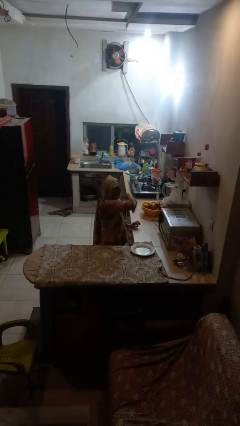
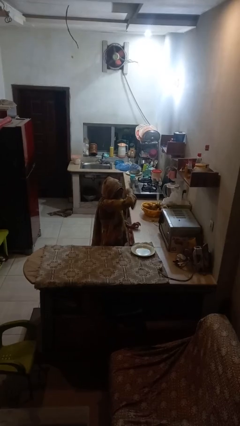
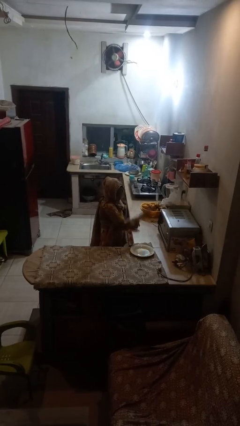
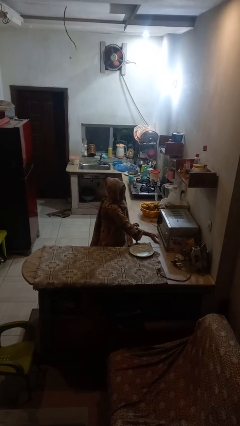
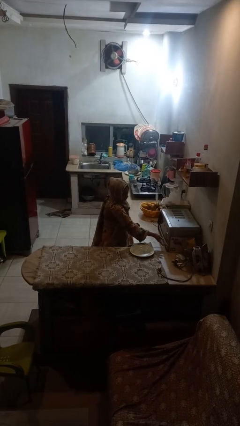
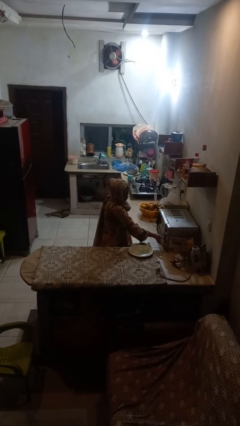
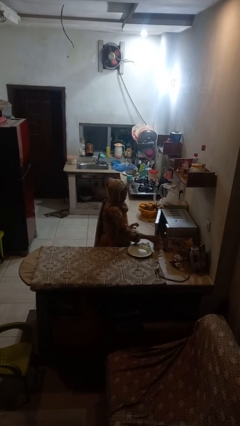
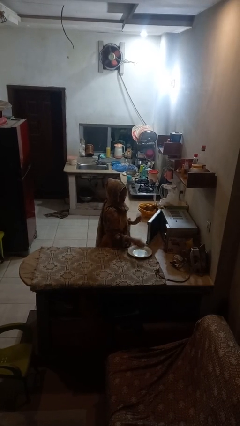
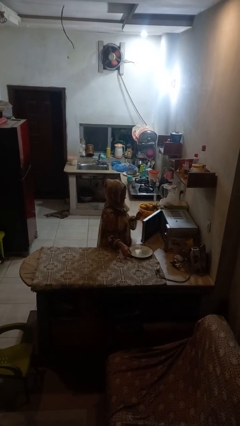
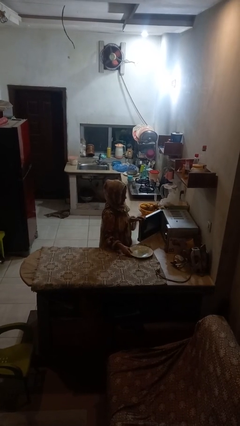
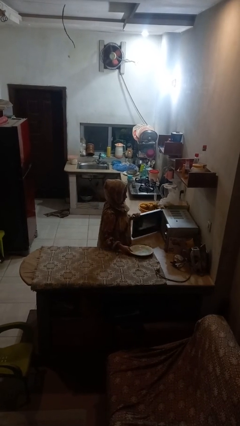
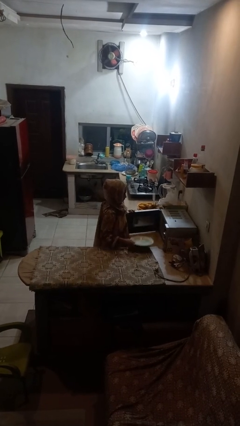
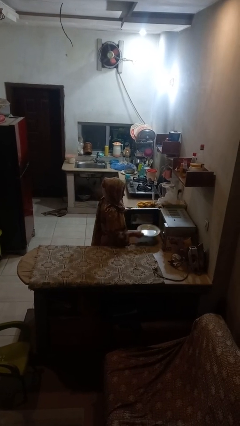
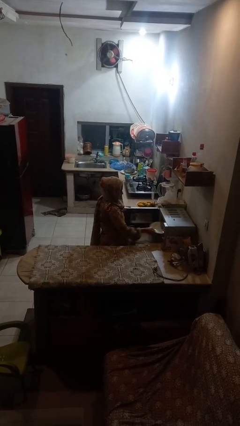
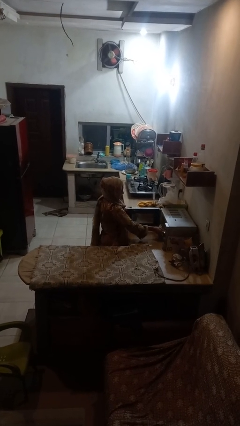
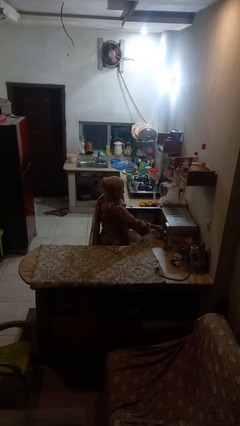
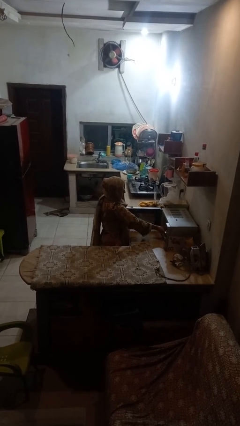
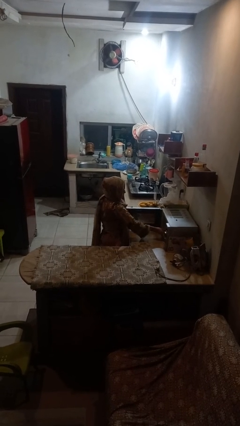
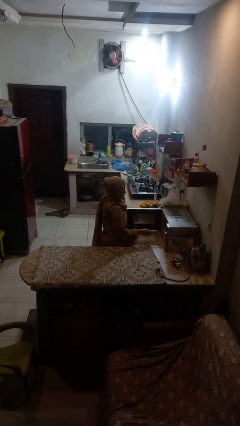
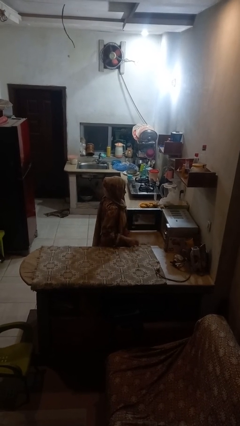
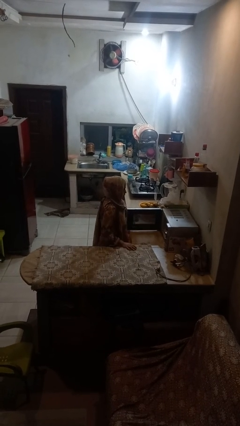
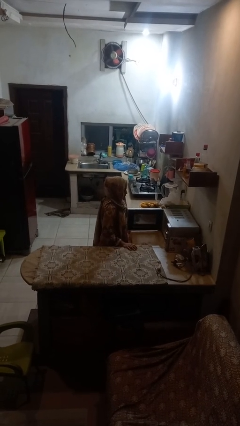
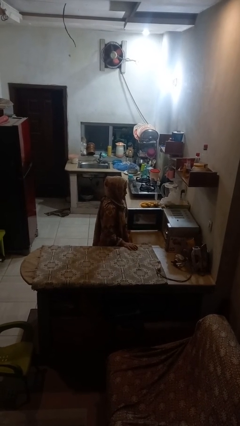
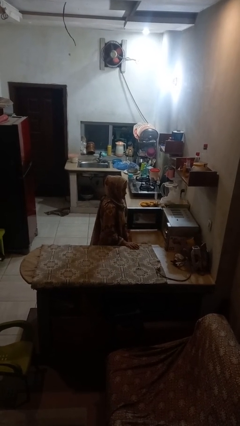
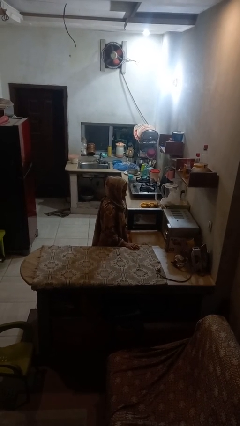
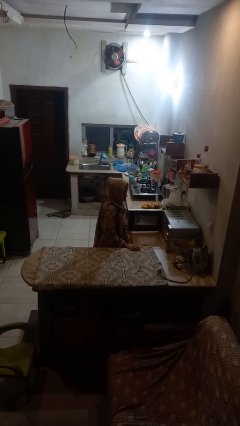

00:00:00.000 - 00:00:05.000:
person puts object into microwave

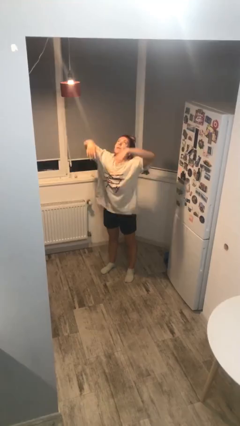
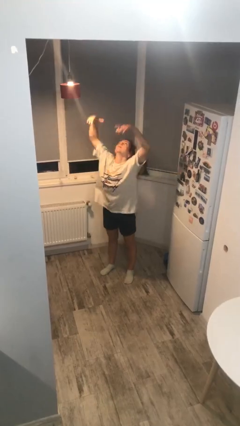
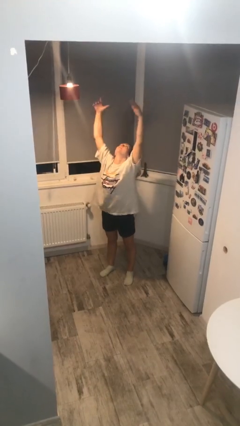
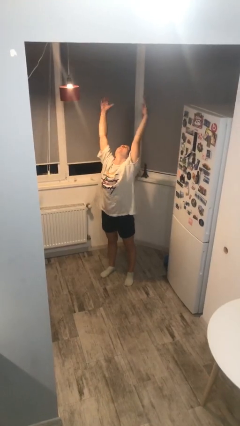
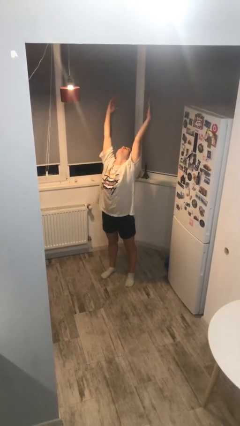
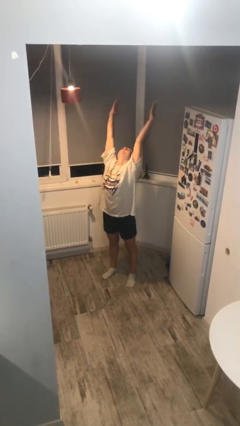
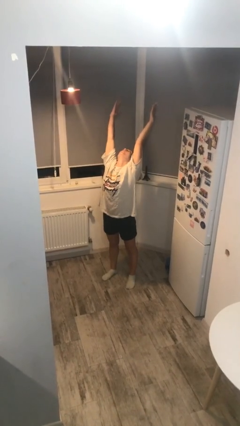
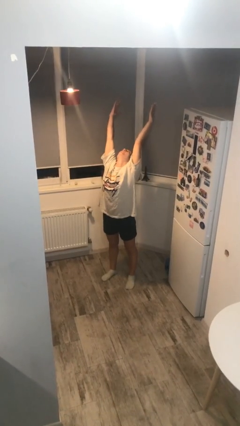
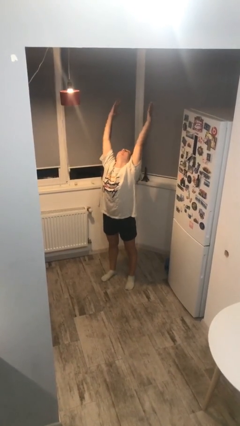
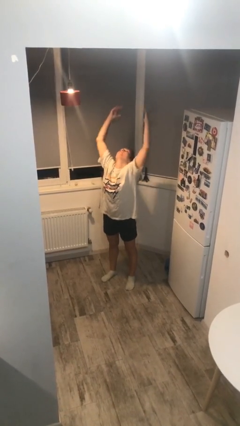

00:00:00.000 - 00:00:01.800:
person stretches arms over head

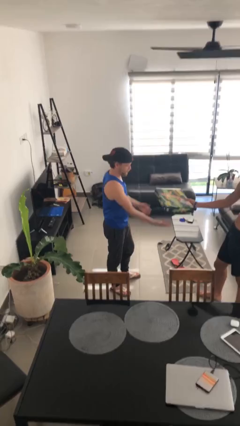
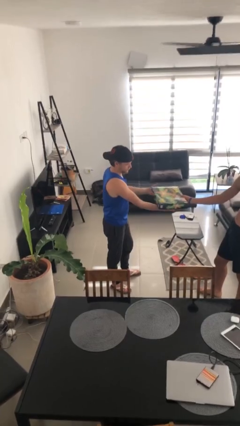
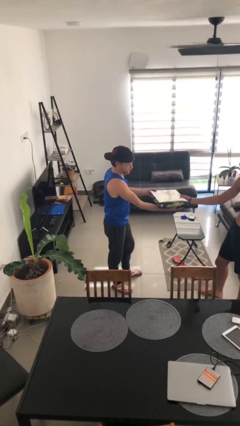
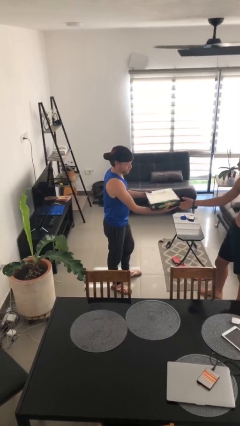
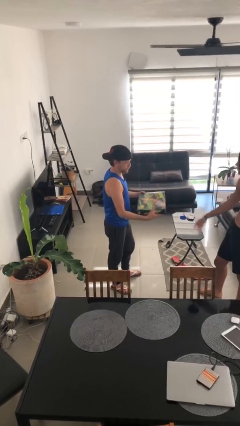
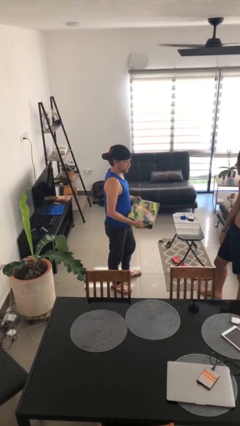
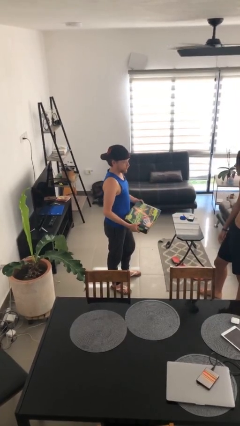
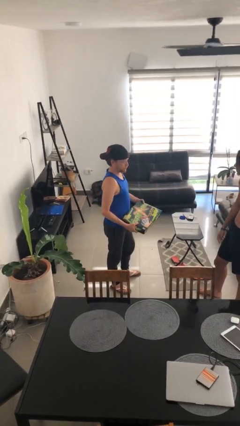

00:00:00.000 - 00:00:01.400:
person transfers object to person

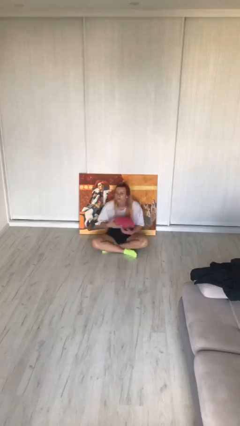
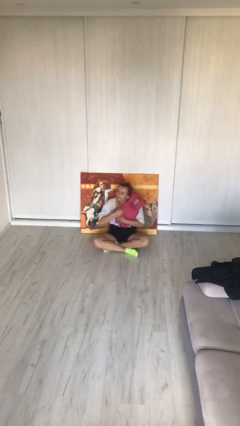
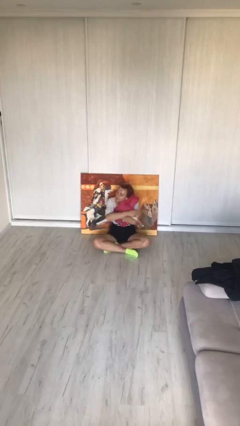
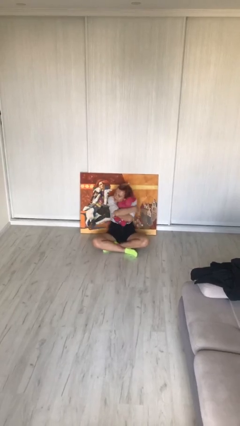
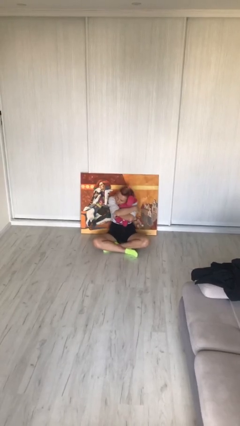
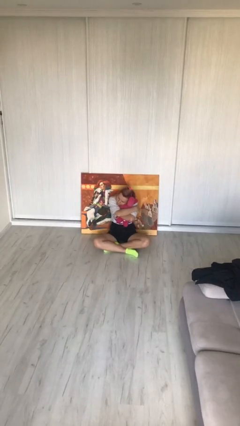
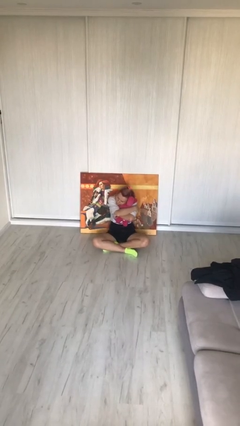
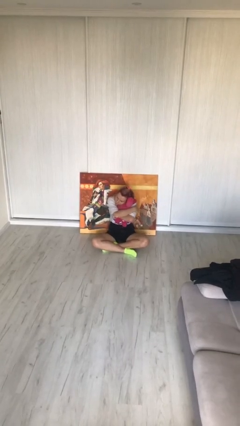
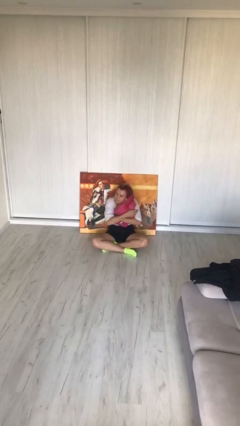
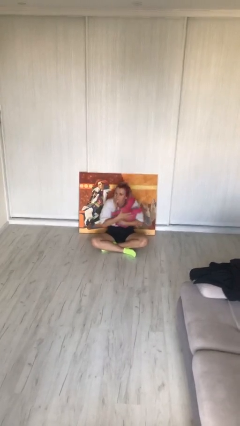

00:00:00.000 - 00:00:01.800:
person hugs stuffed animal

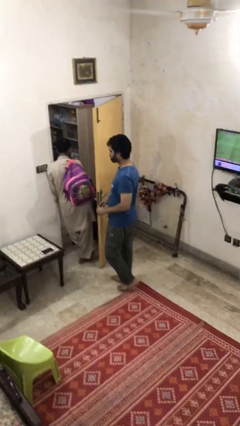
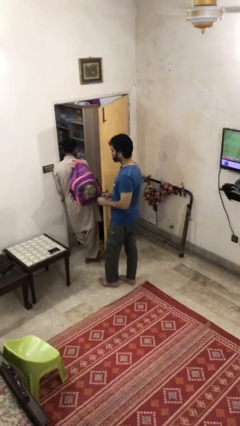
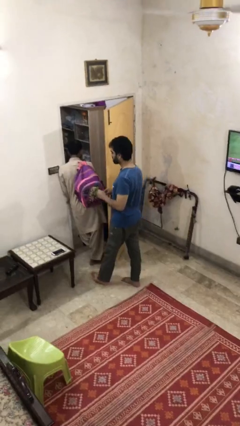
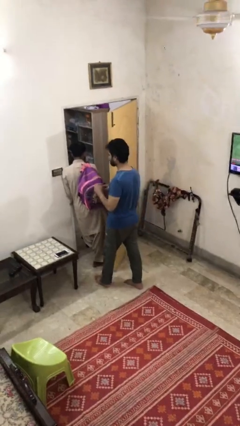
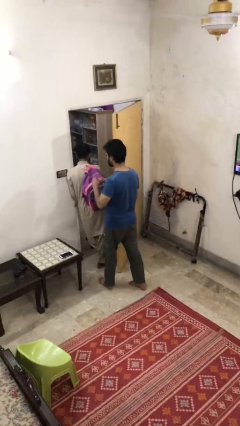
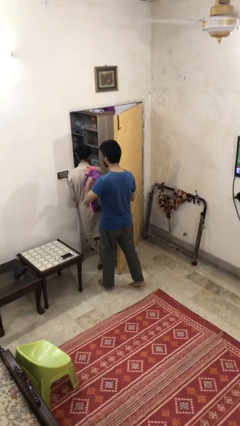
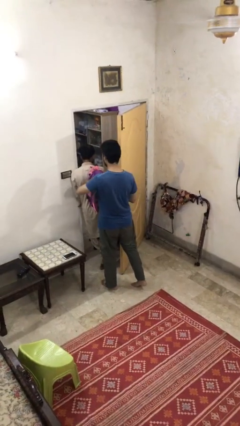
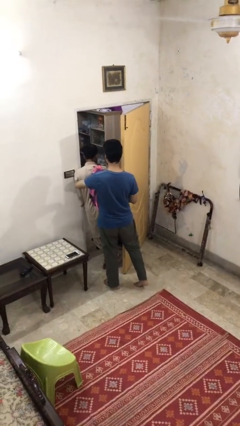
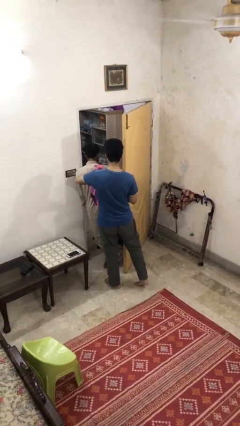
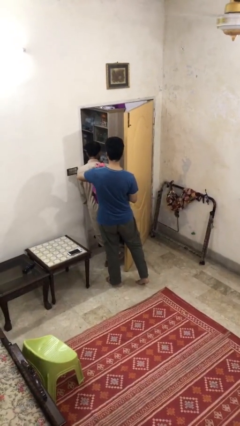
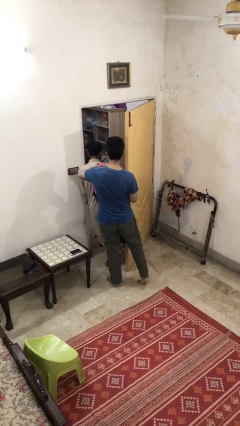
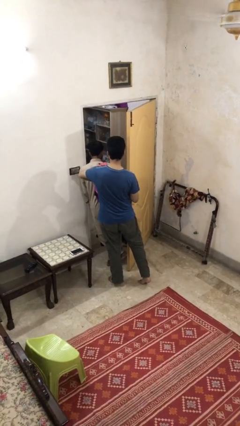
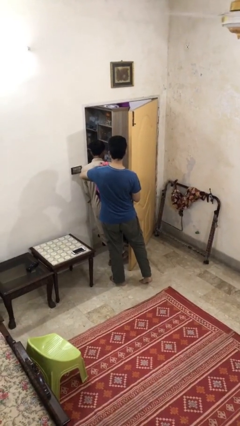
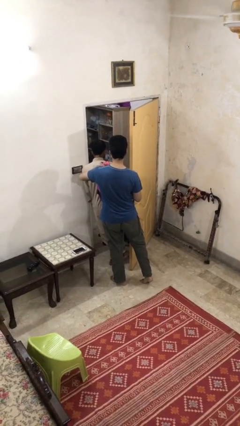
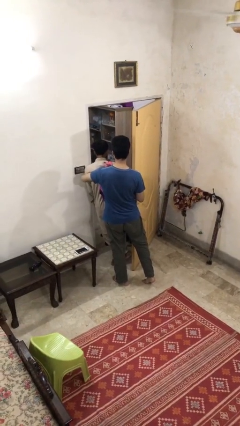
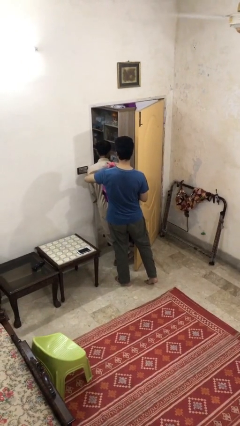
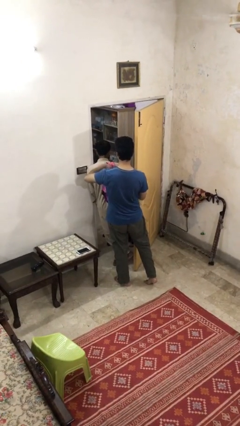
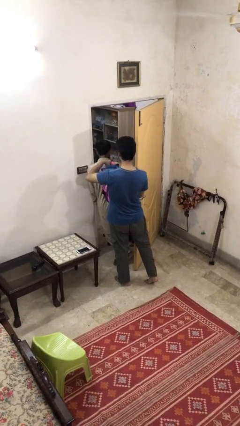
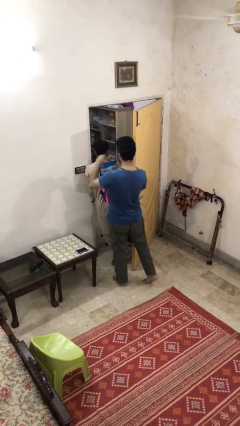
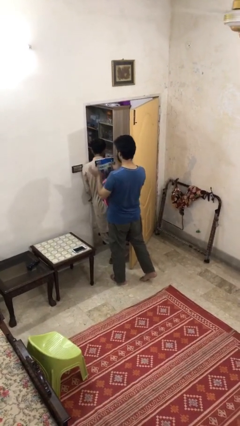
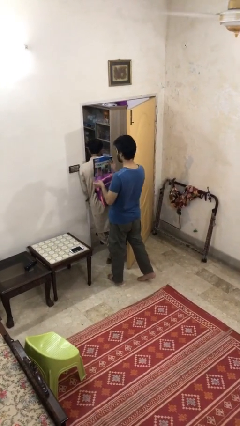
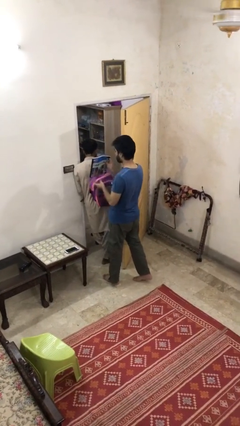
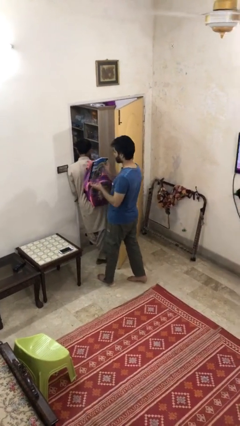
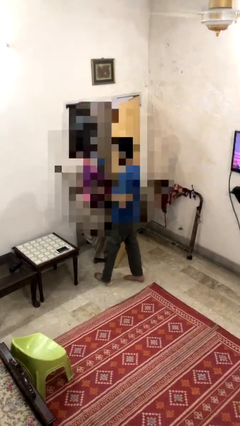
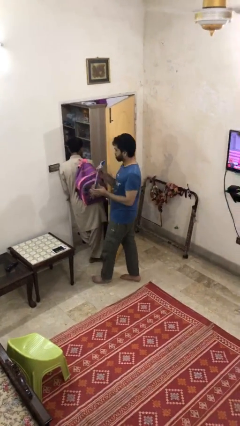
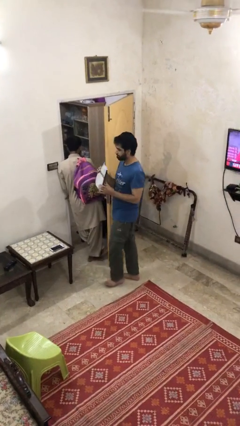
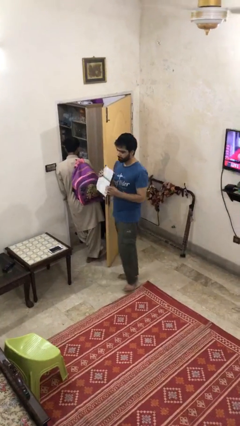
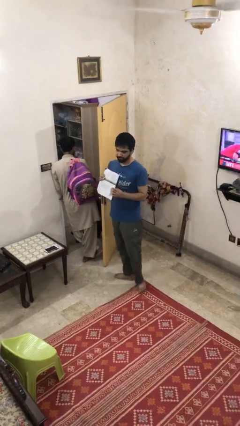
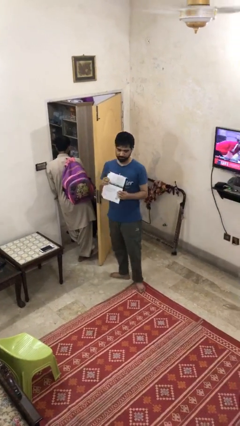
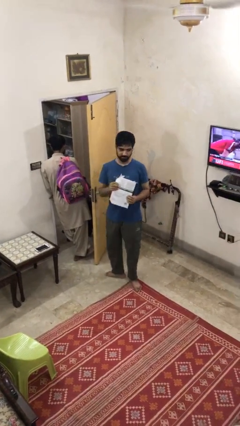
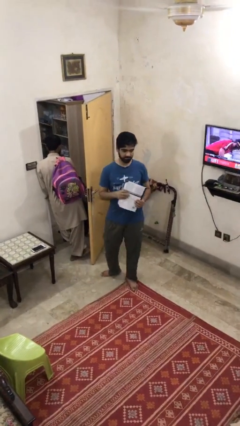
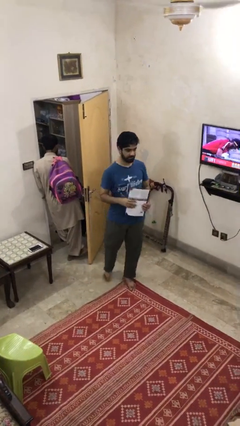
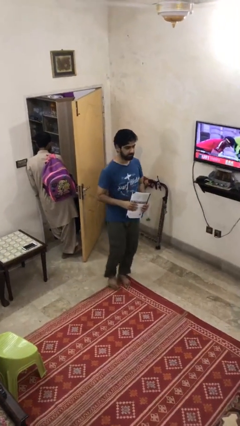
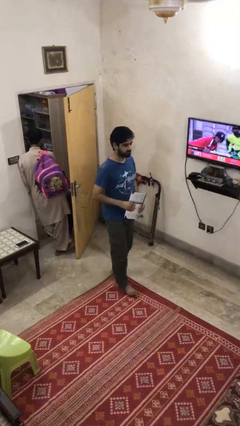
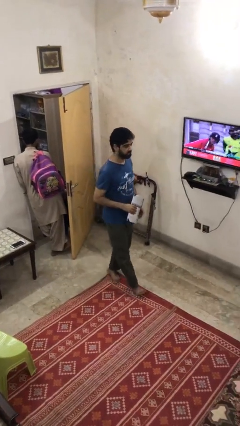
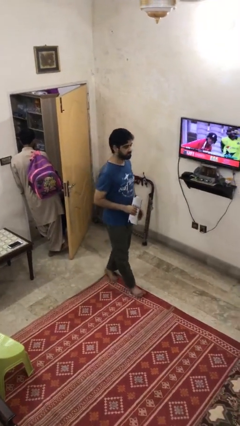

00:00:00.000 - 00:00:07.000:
person steals object from person

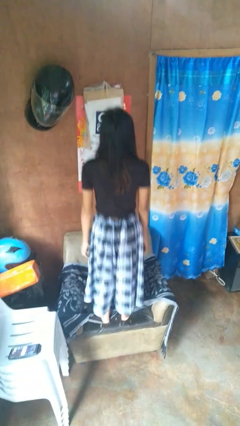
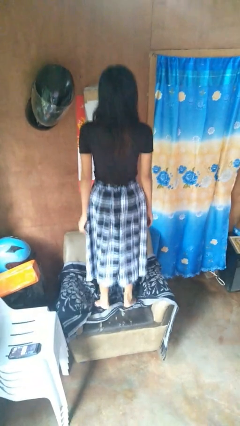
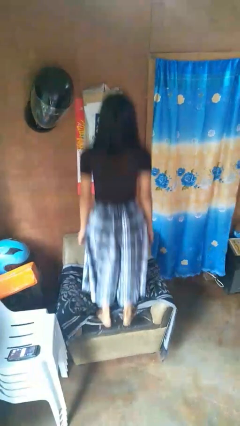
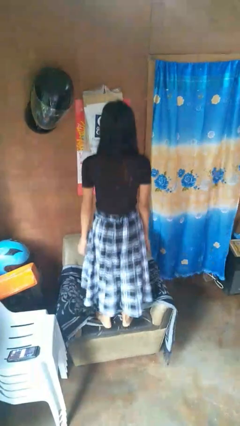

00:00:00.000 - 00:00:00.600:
person jumps on couch
